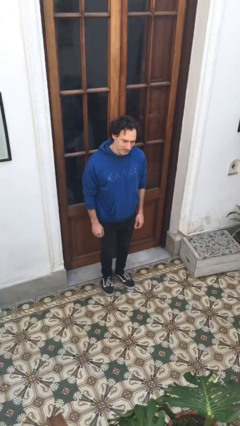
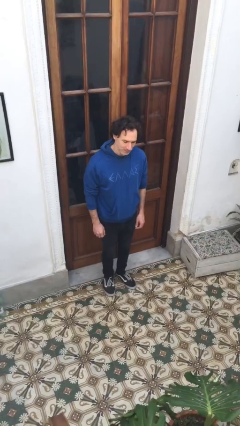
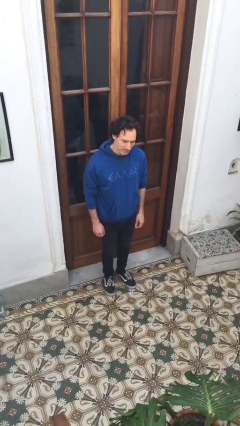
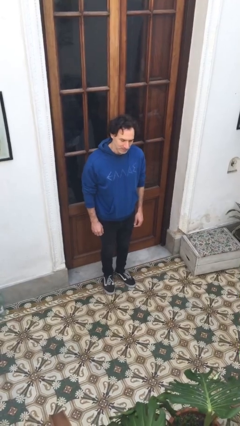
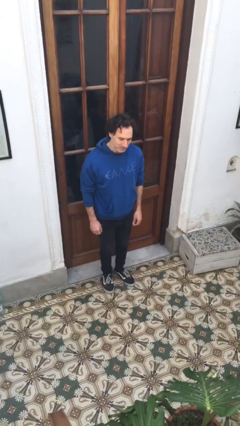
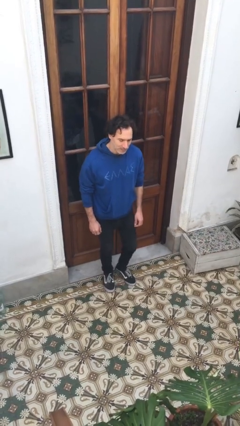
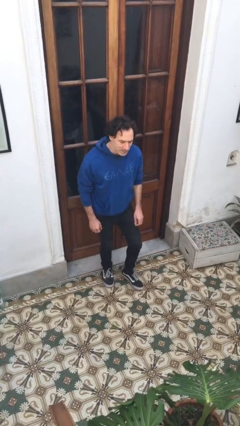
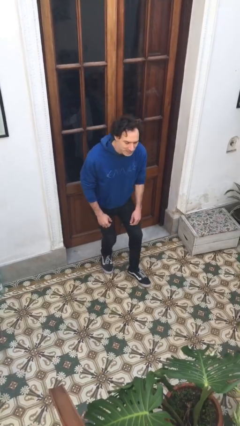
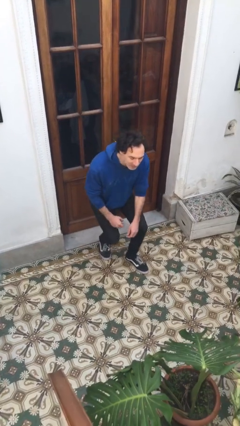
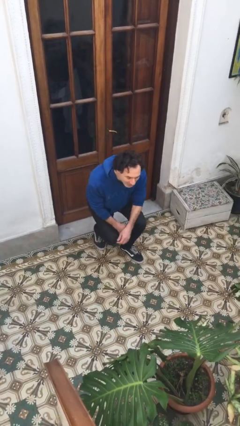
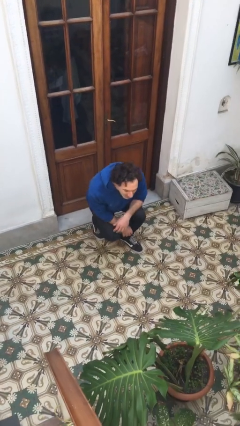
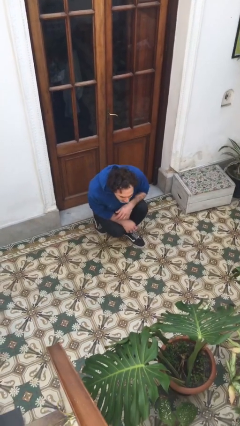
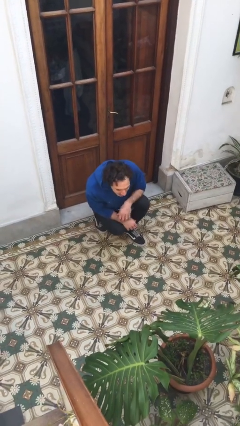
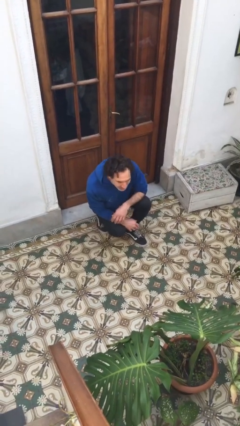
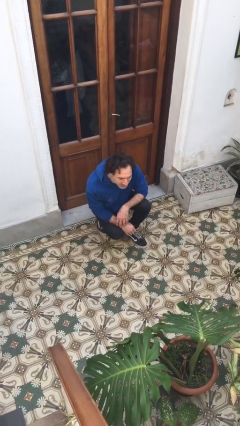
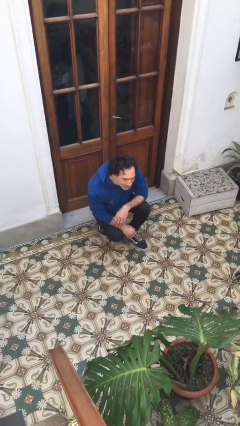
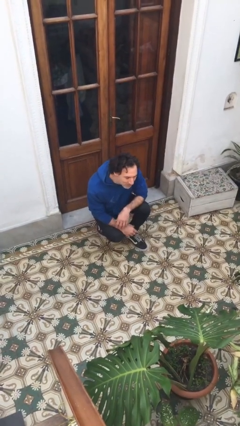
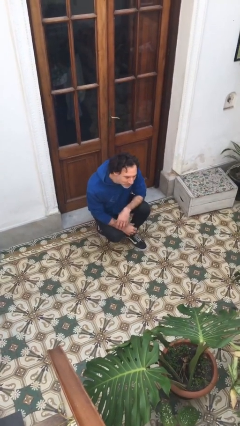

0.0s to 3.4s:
person squats

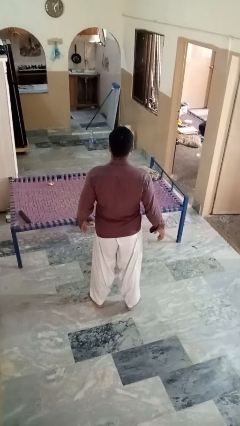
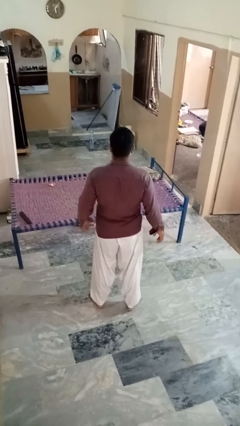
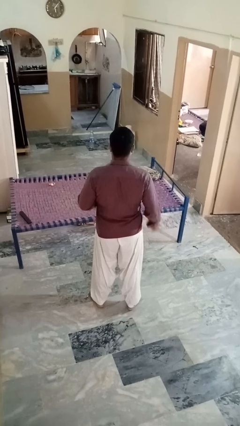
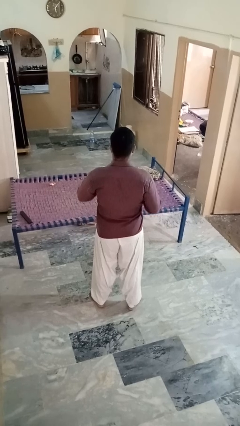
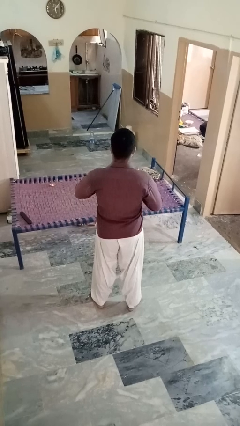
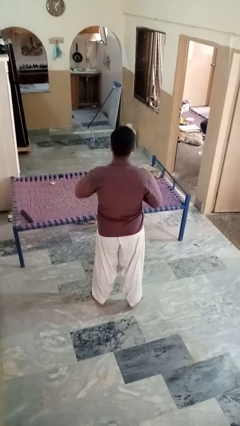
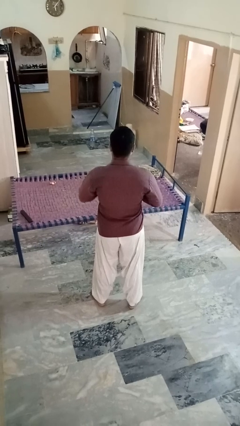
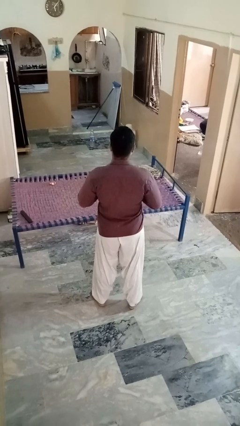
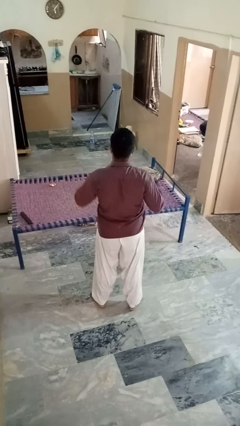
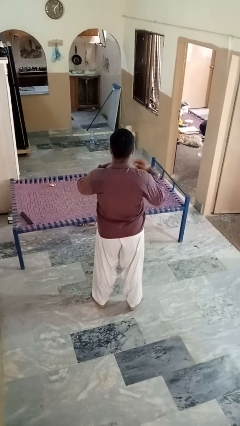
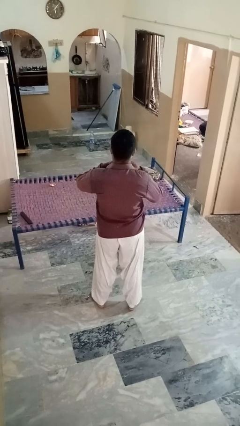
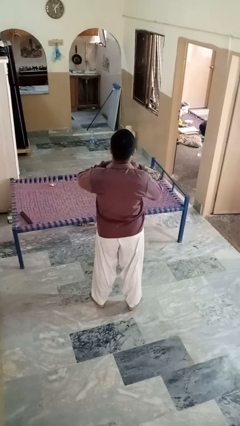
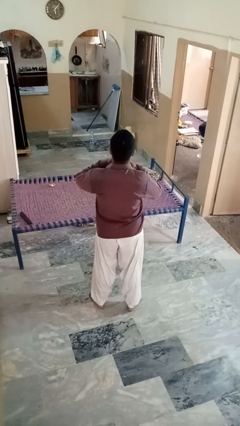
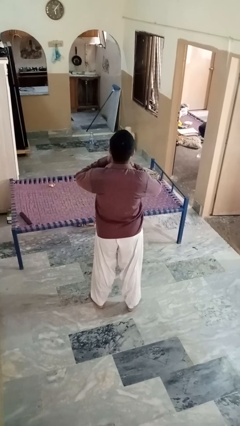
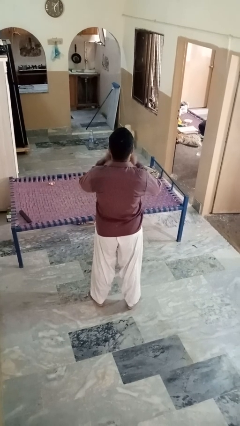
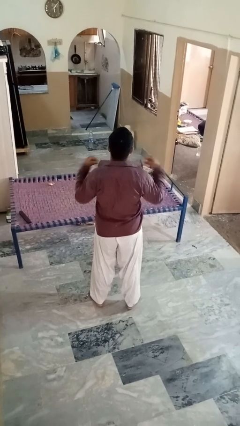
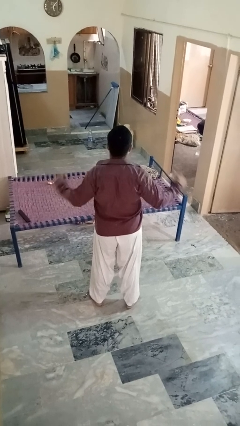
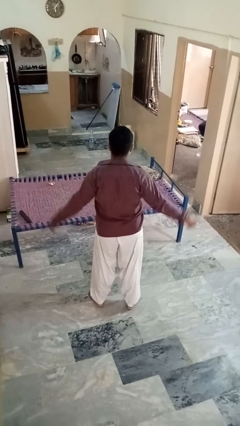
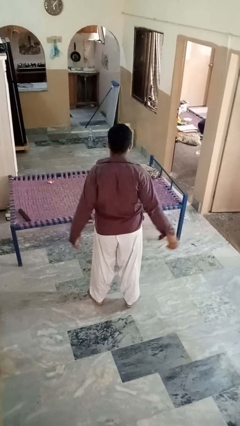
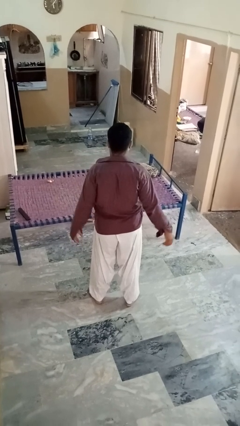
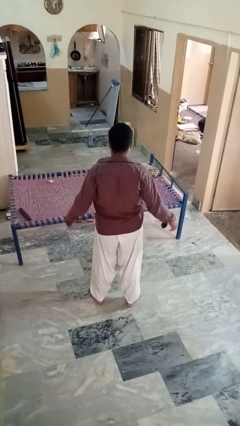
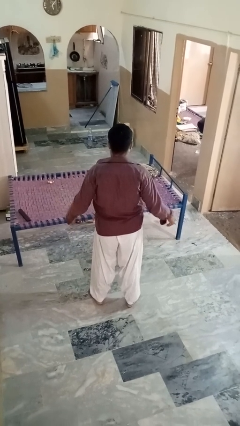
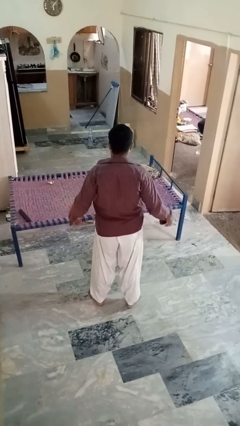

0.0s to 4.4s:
person unbuttons shirt

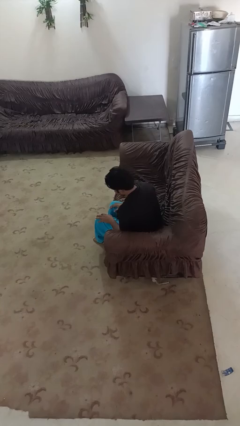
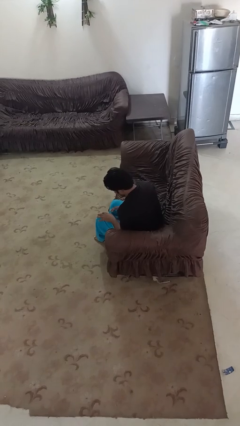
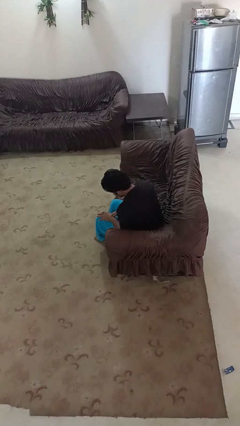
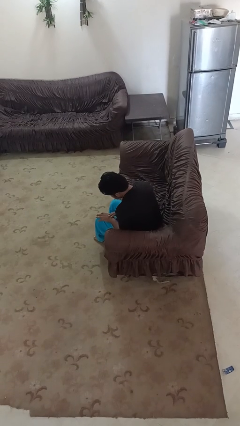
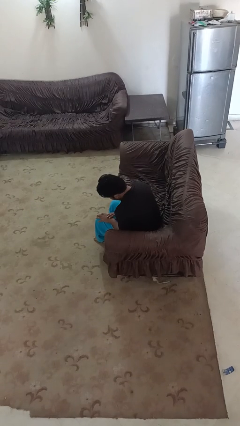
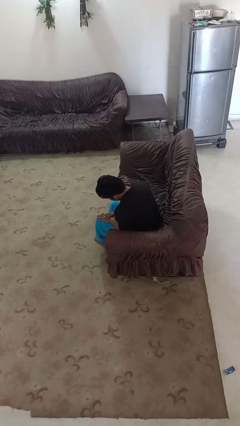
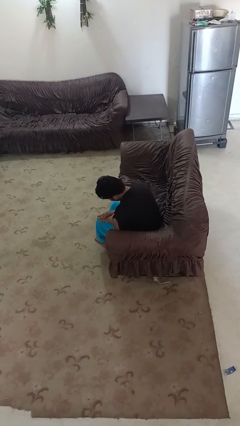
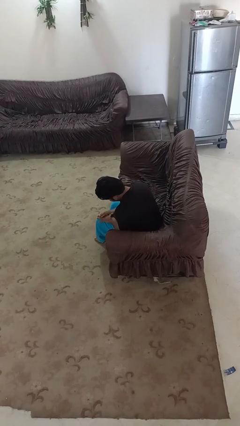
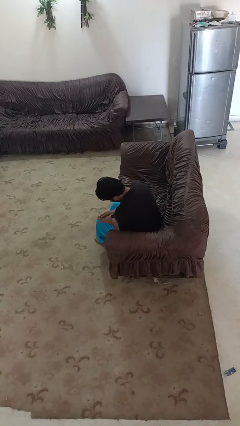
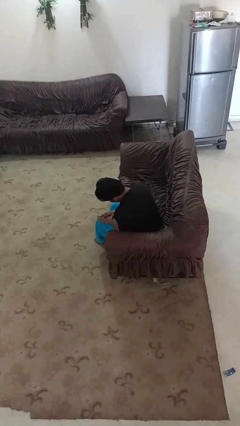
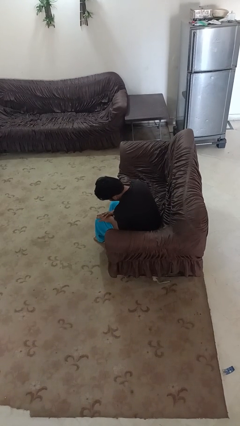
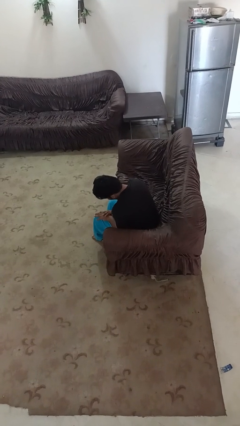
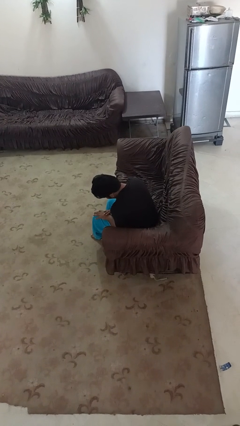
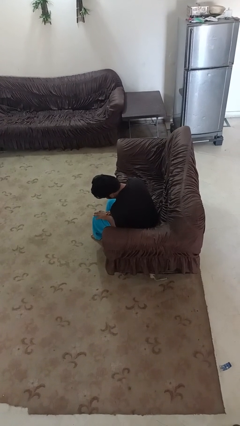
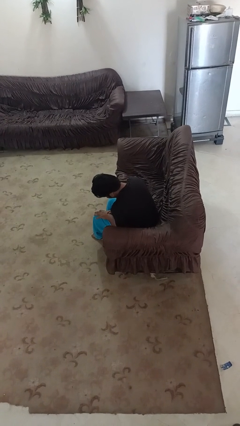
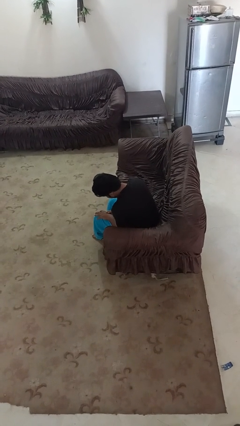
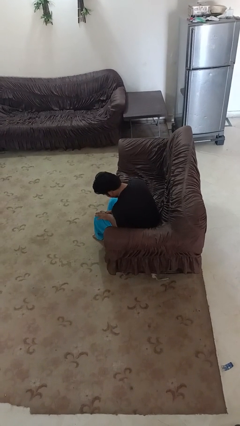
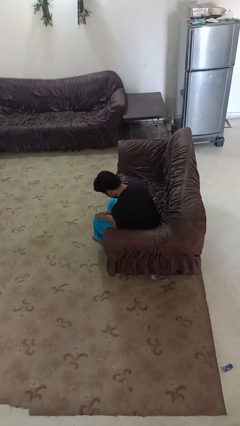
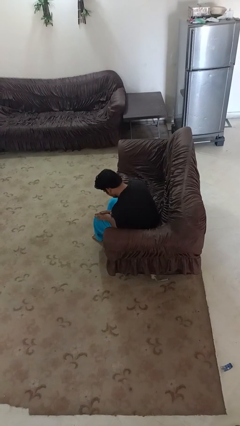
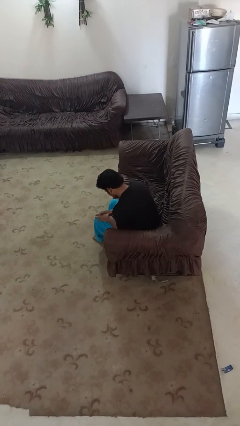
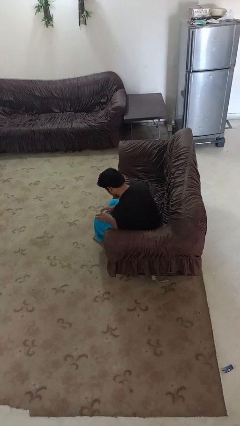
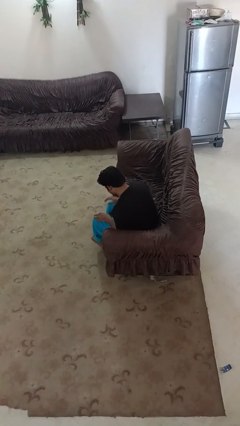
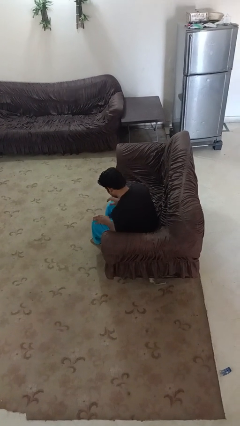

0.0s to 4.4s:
person looks at hands in lap

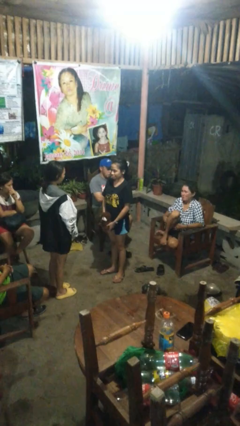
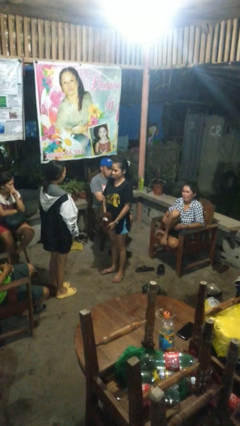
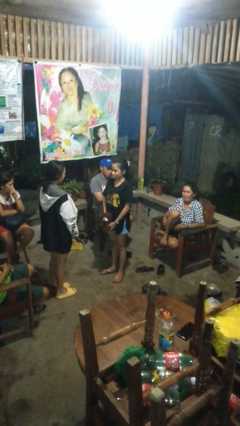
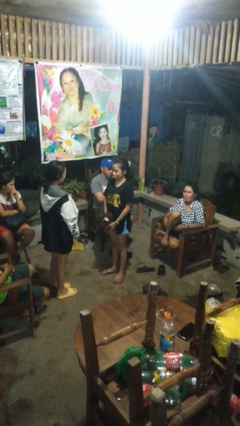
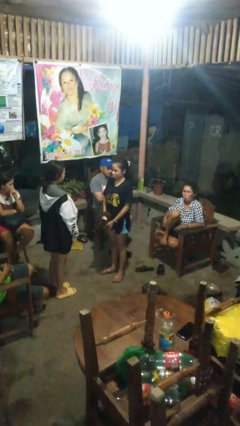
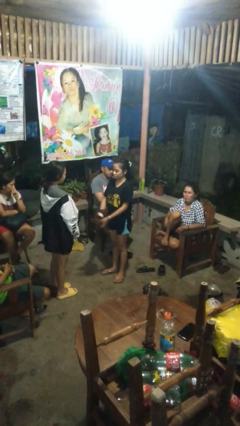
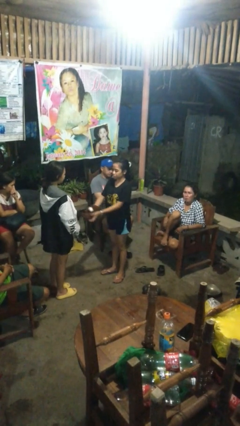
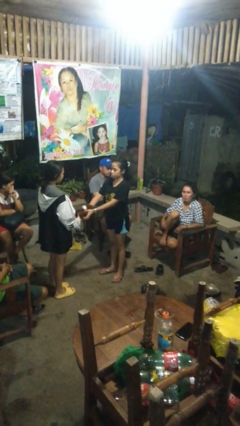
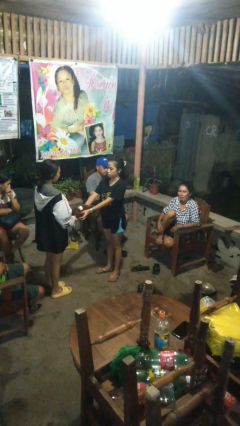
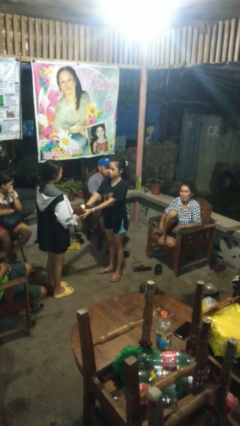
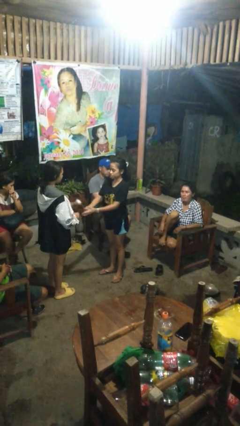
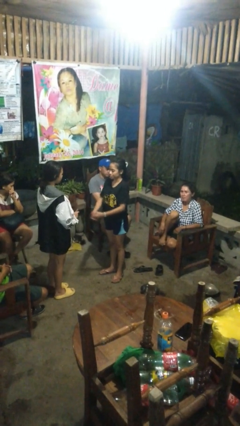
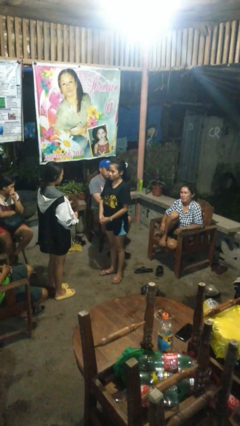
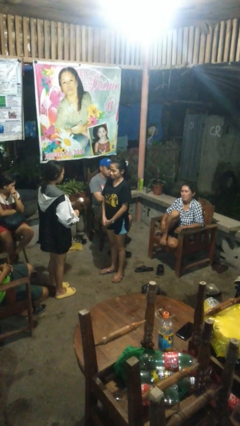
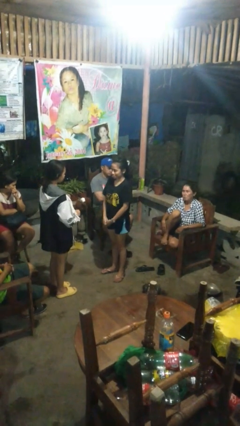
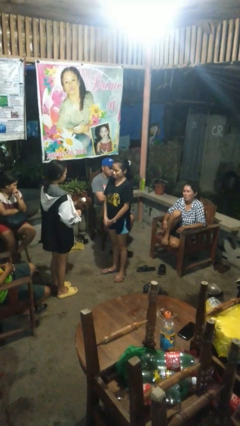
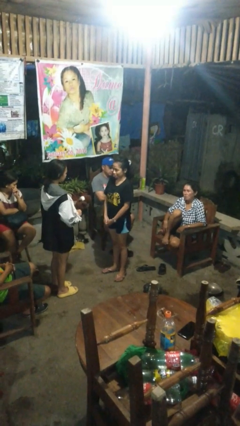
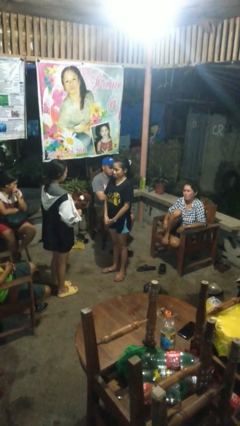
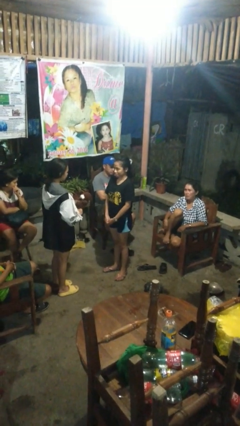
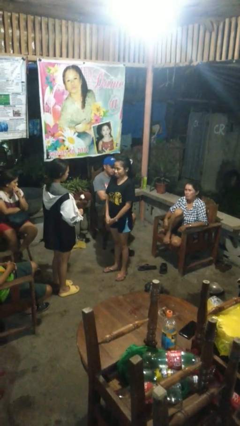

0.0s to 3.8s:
person transfers object to person

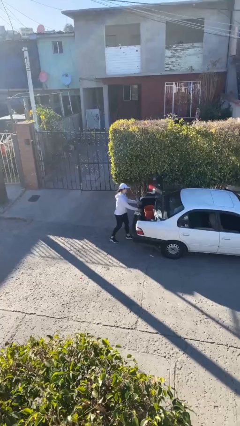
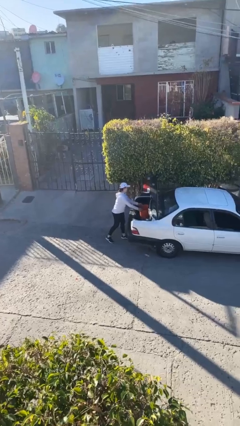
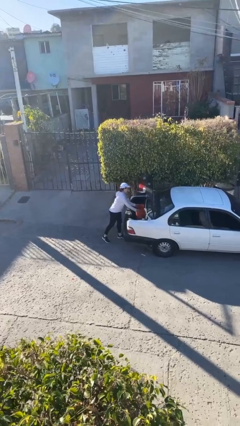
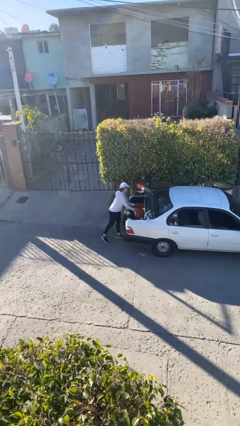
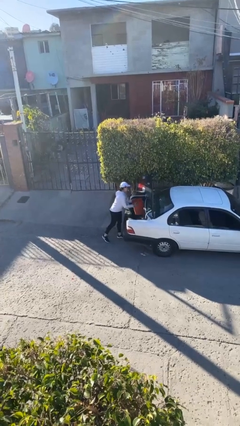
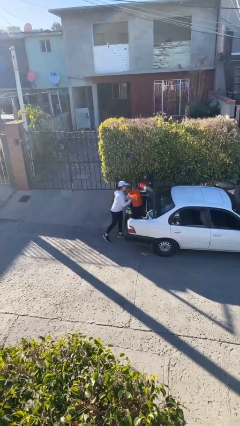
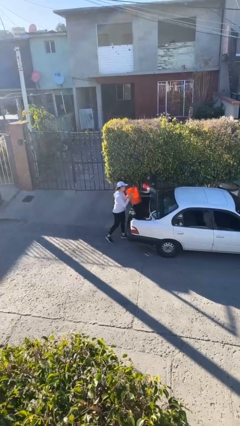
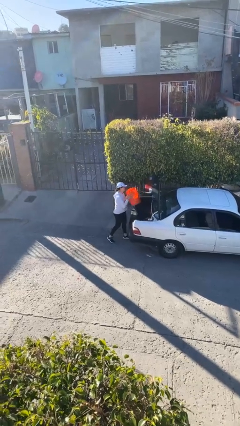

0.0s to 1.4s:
person unloads car
